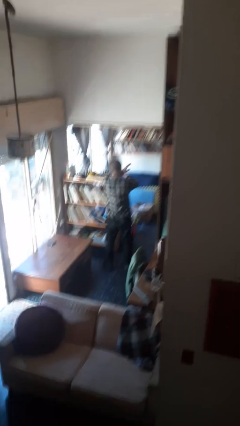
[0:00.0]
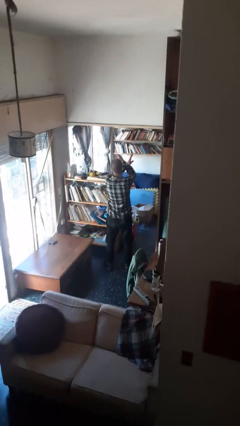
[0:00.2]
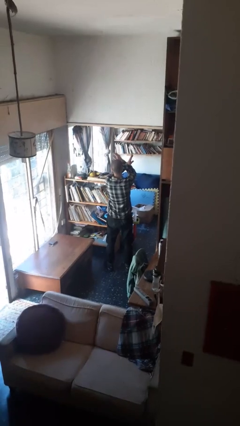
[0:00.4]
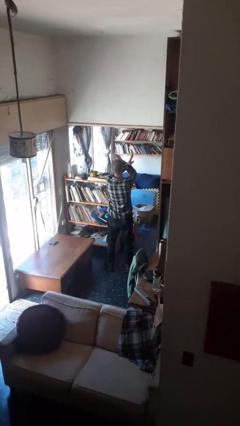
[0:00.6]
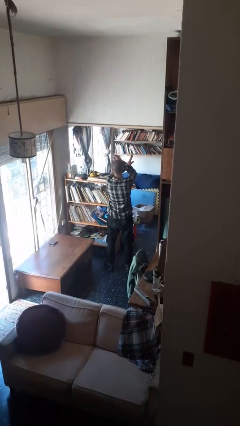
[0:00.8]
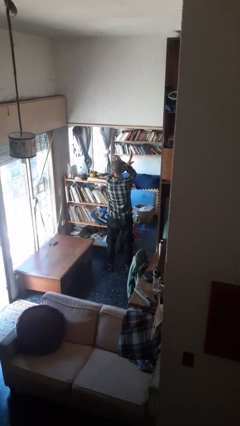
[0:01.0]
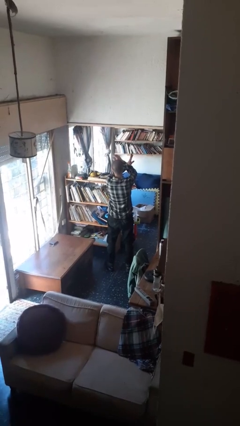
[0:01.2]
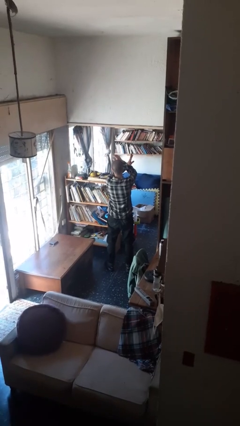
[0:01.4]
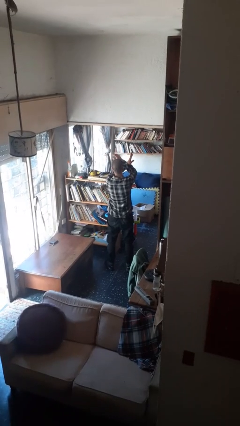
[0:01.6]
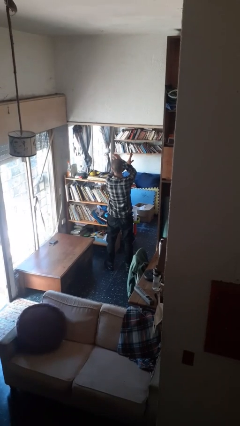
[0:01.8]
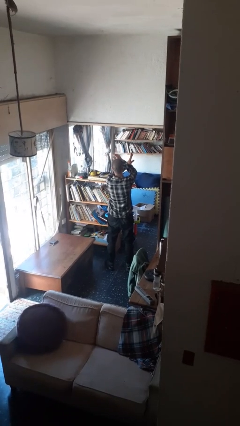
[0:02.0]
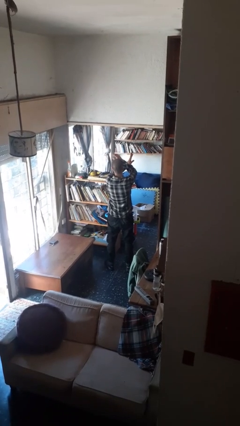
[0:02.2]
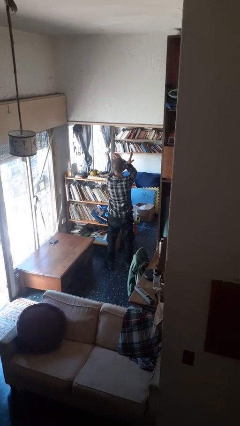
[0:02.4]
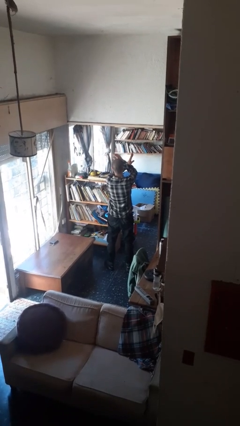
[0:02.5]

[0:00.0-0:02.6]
person gestures arms x

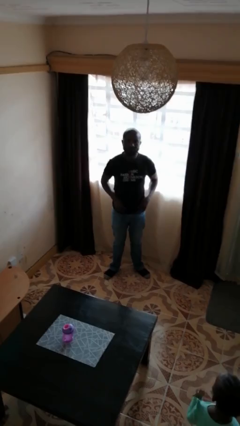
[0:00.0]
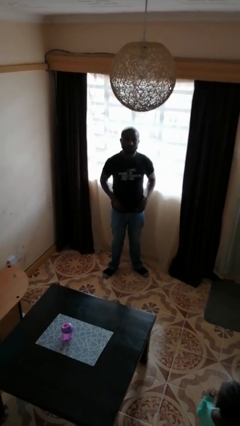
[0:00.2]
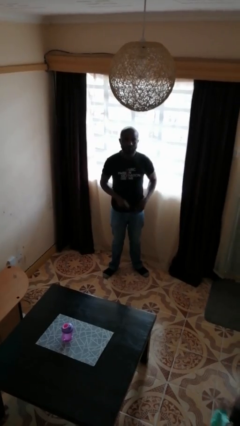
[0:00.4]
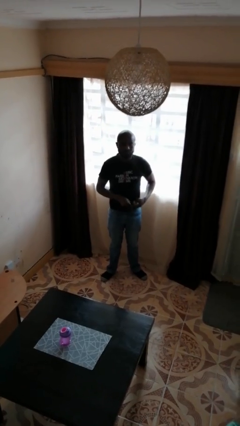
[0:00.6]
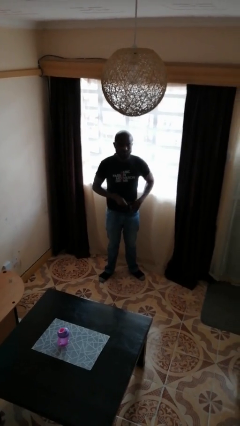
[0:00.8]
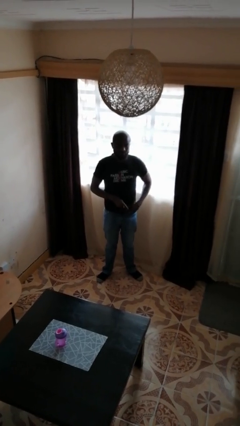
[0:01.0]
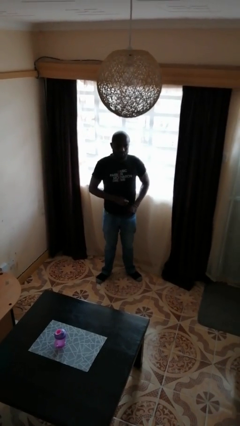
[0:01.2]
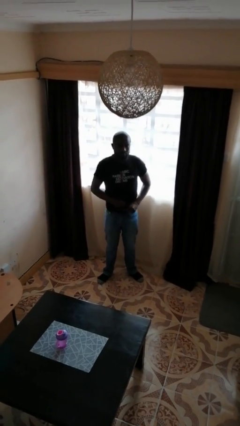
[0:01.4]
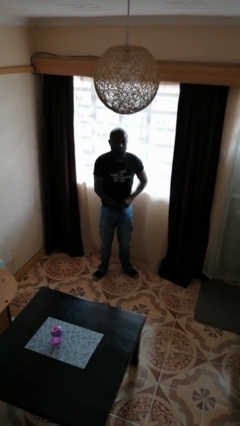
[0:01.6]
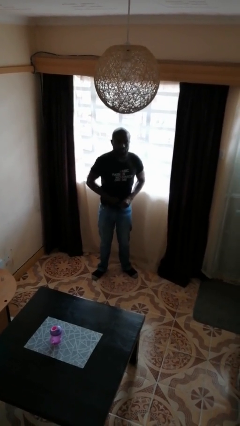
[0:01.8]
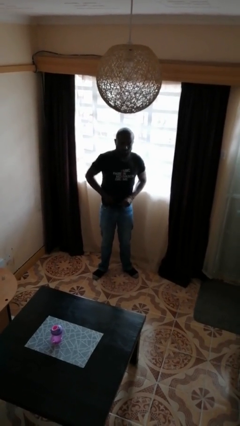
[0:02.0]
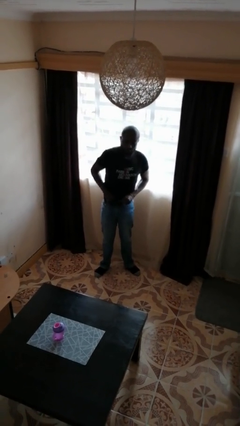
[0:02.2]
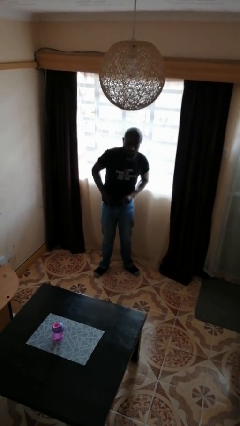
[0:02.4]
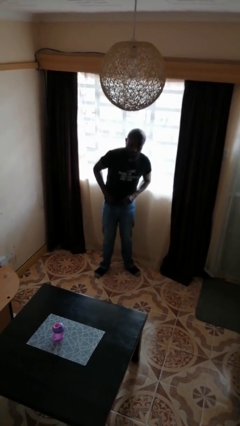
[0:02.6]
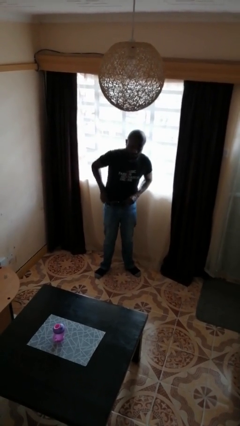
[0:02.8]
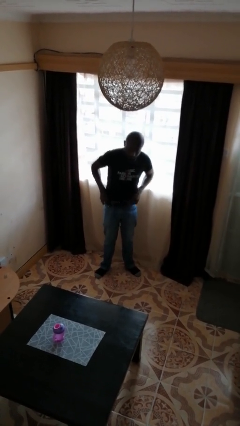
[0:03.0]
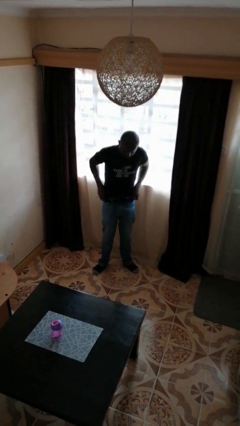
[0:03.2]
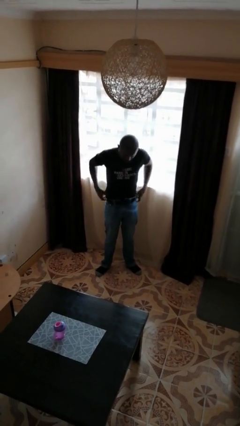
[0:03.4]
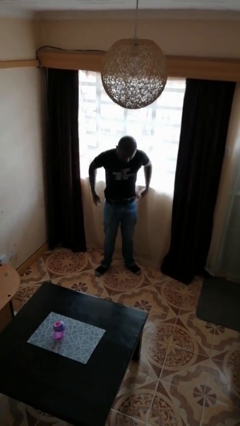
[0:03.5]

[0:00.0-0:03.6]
person tucks in shirt

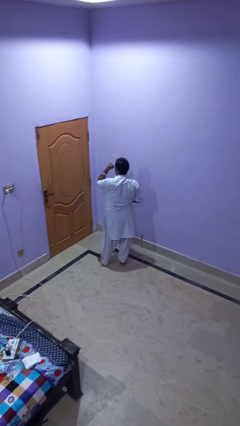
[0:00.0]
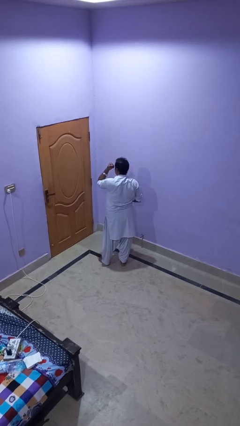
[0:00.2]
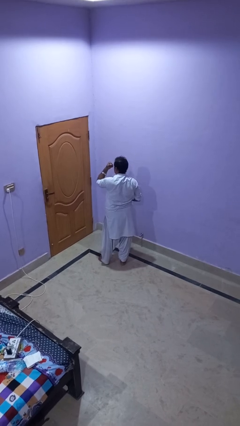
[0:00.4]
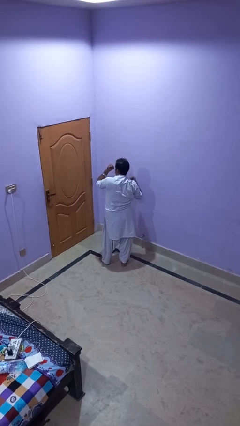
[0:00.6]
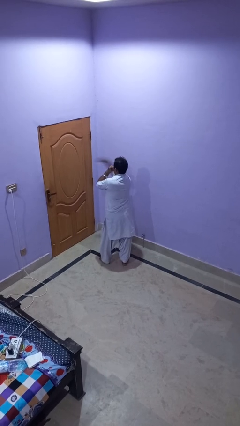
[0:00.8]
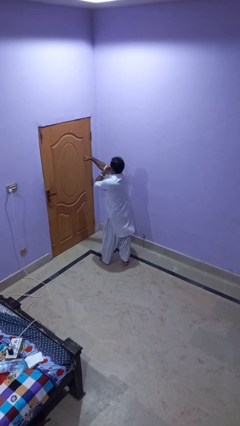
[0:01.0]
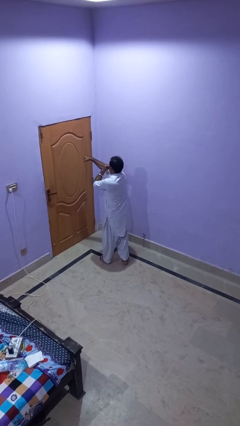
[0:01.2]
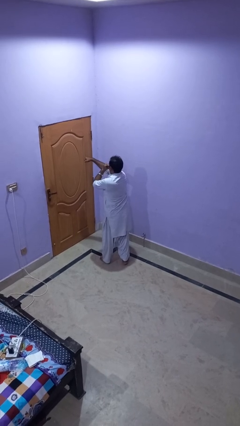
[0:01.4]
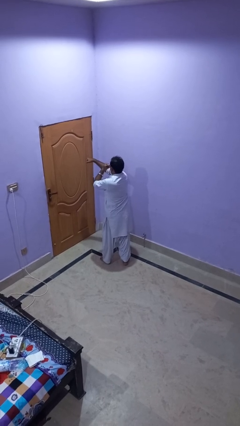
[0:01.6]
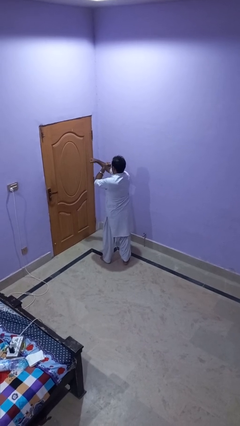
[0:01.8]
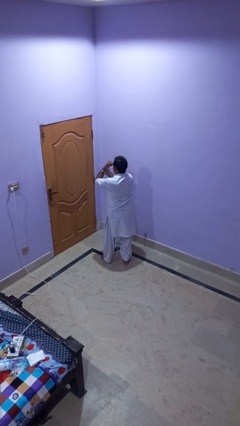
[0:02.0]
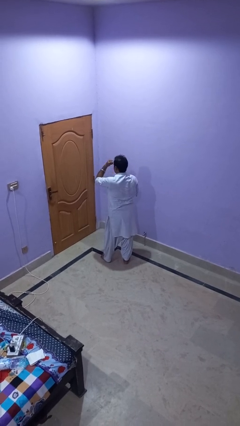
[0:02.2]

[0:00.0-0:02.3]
person punches

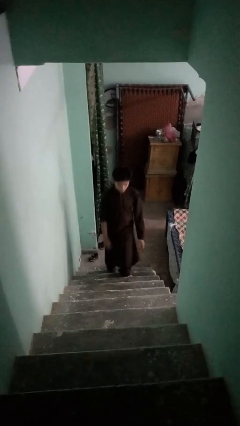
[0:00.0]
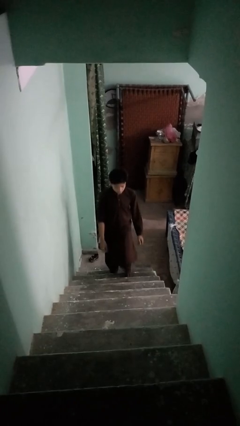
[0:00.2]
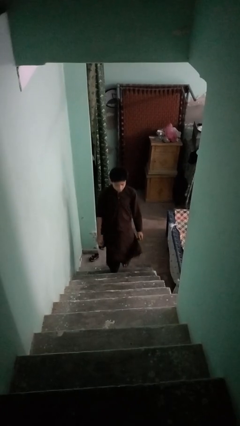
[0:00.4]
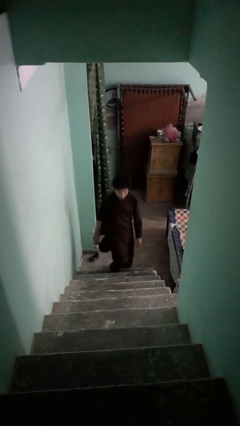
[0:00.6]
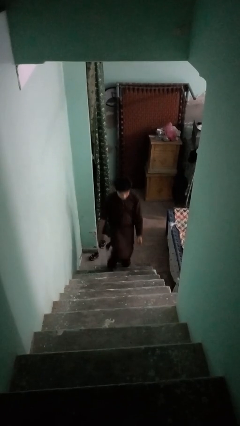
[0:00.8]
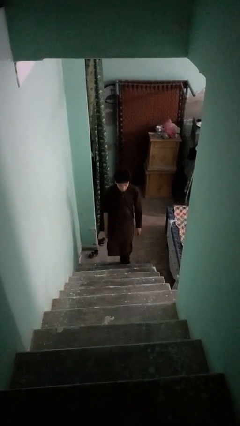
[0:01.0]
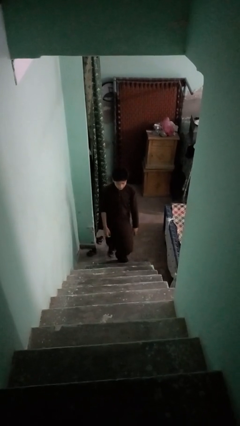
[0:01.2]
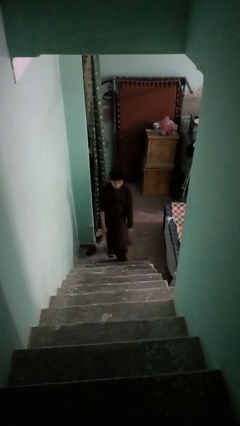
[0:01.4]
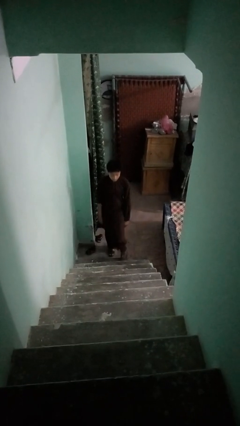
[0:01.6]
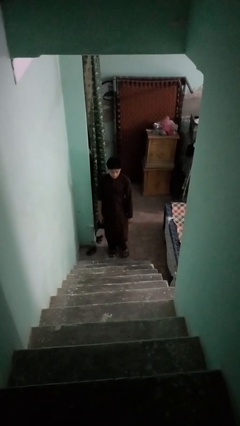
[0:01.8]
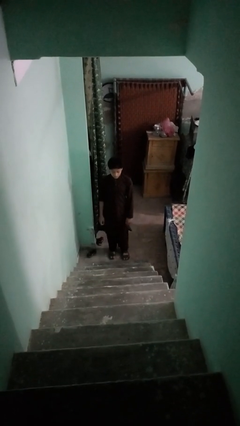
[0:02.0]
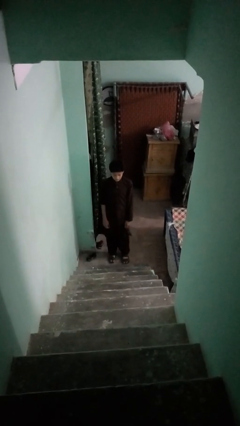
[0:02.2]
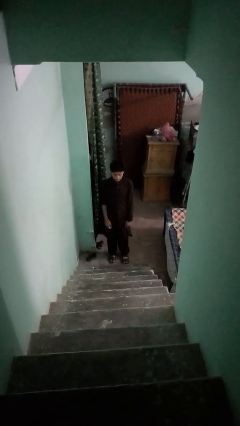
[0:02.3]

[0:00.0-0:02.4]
person climbs down stairs

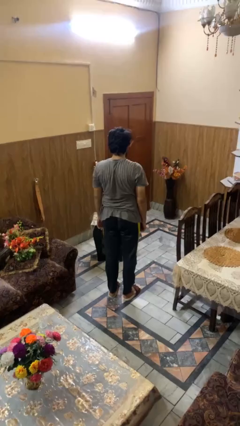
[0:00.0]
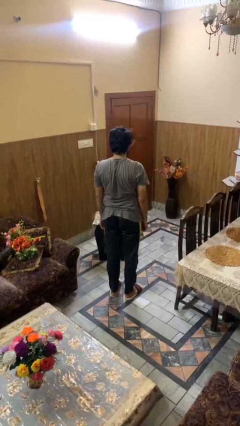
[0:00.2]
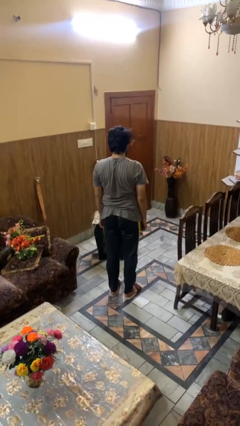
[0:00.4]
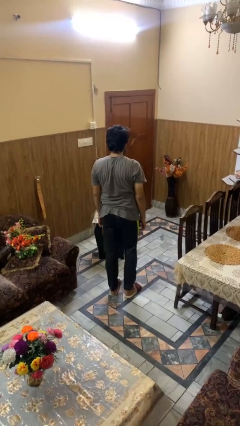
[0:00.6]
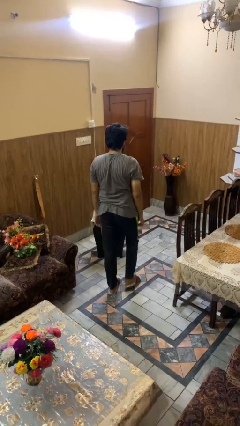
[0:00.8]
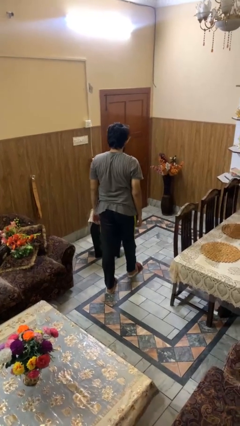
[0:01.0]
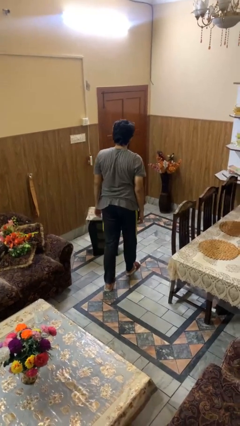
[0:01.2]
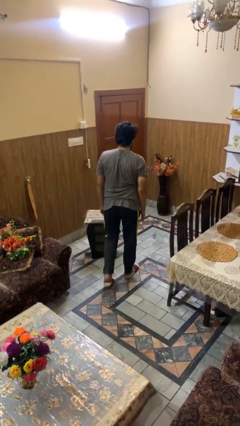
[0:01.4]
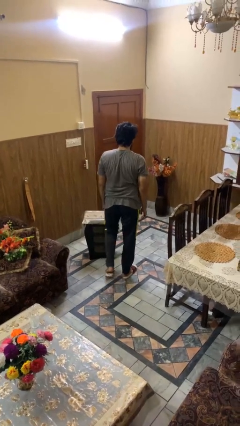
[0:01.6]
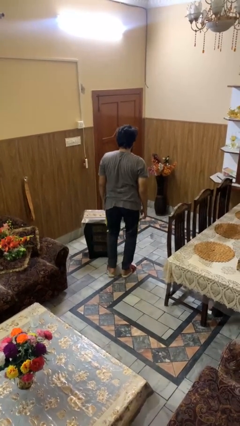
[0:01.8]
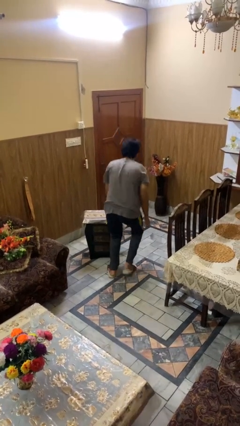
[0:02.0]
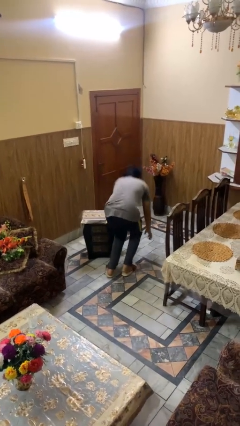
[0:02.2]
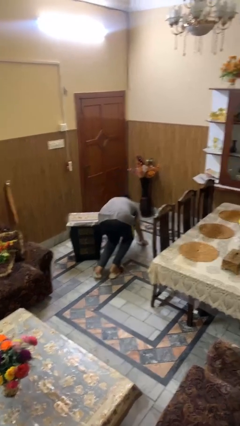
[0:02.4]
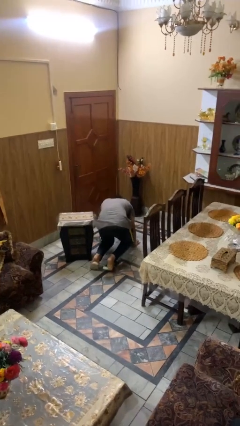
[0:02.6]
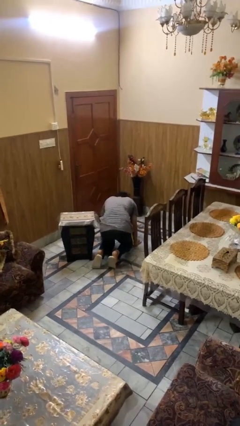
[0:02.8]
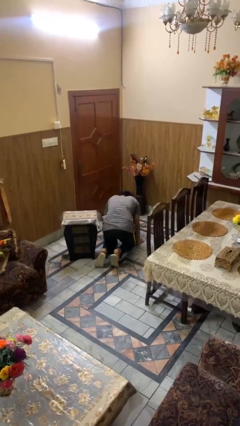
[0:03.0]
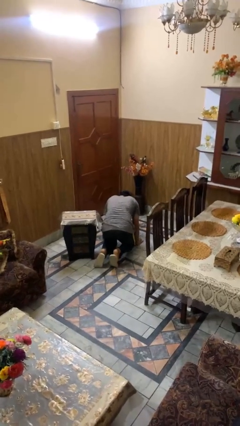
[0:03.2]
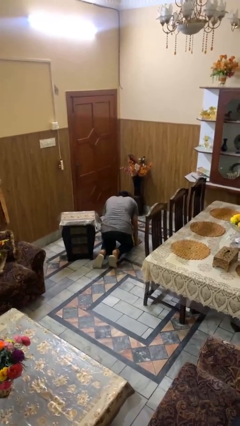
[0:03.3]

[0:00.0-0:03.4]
person trips on object on floor

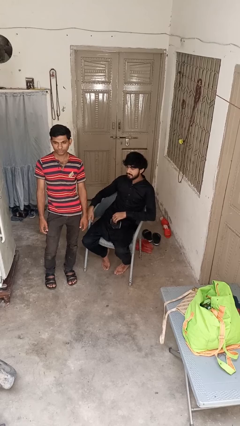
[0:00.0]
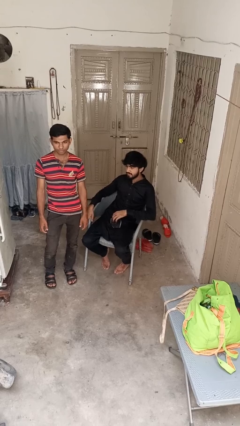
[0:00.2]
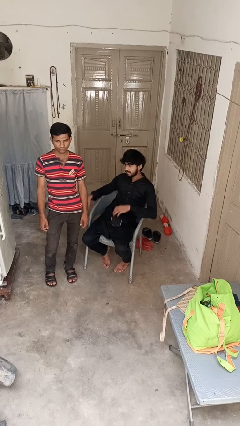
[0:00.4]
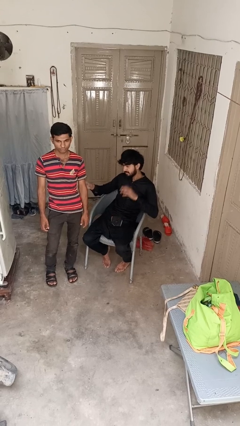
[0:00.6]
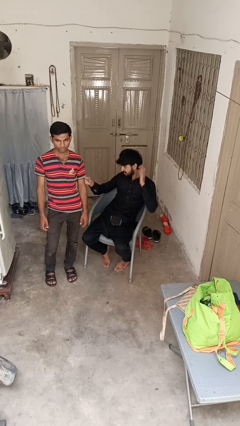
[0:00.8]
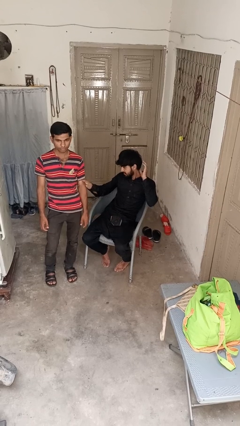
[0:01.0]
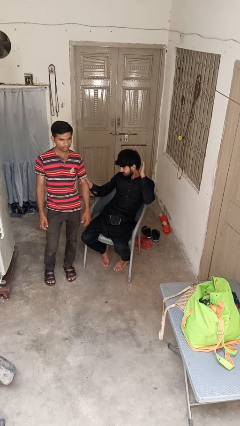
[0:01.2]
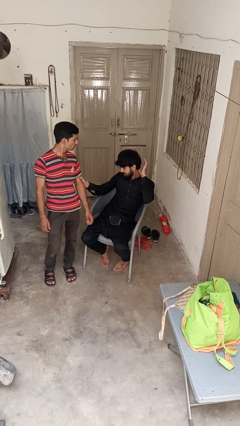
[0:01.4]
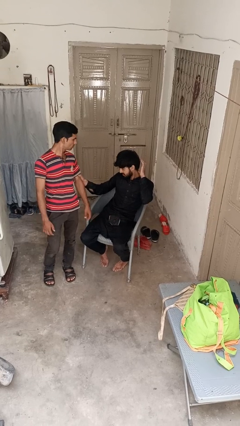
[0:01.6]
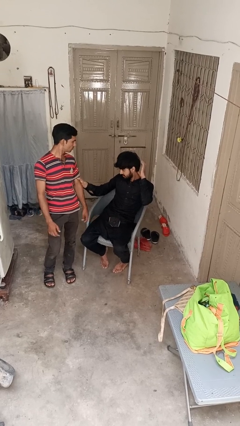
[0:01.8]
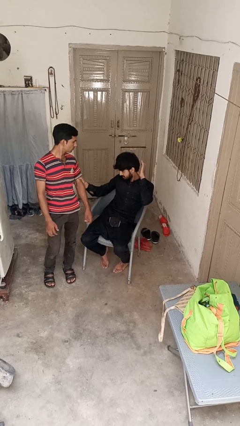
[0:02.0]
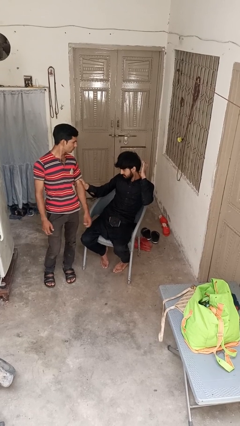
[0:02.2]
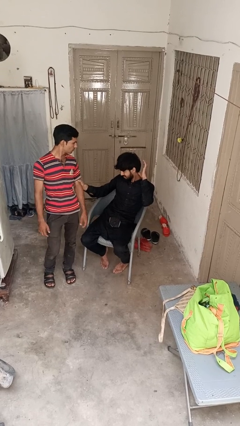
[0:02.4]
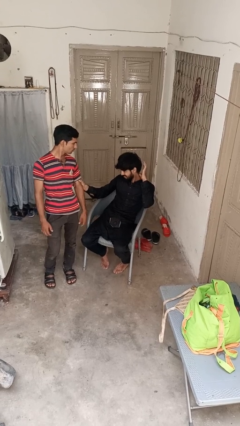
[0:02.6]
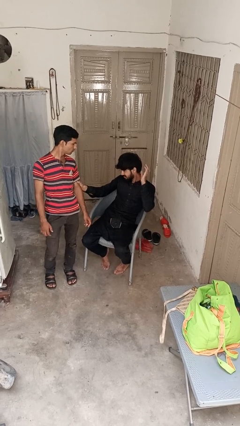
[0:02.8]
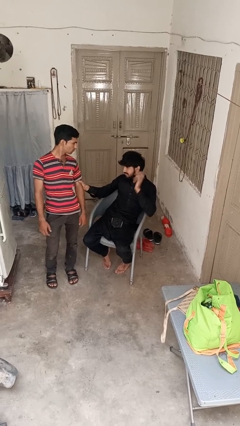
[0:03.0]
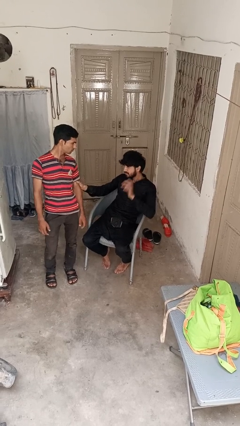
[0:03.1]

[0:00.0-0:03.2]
person grabs person by bicep

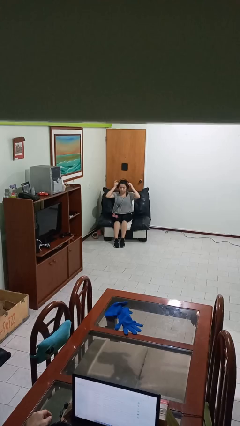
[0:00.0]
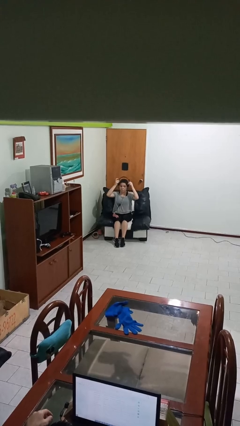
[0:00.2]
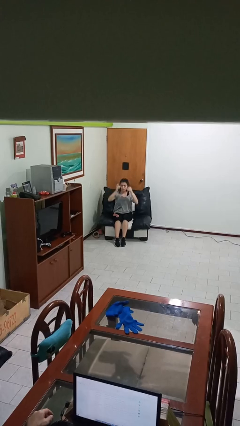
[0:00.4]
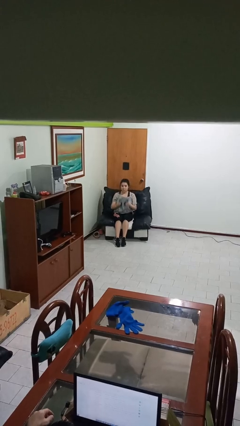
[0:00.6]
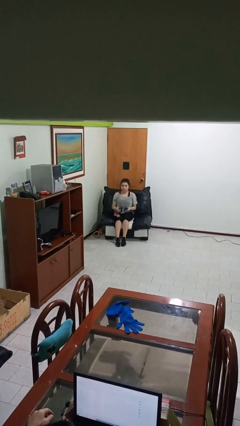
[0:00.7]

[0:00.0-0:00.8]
person takes off headphones
